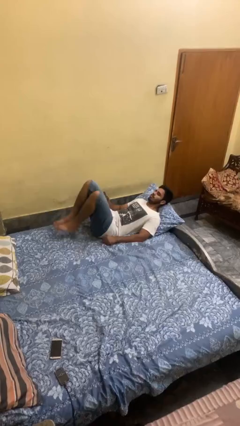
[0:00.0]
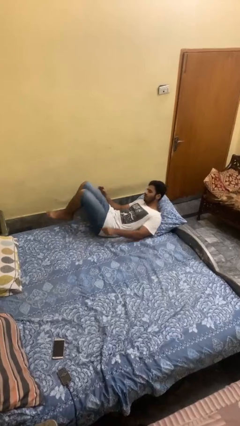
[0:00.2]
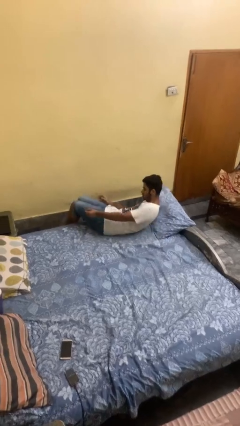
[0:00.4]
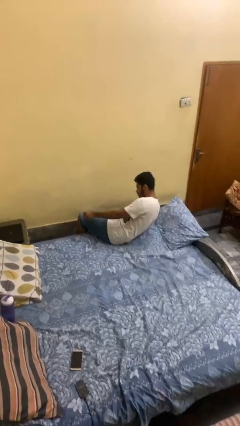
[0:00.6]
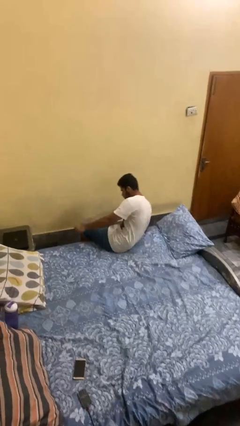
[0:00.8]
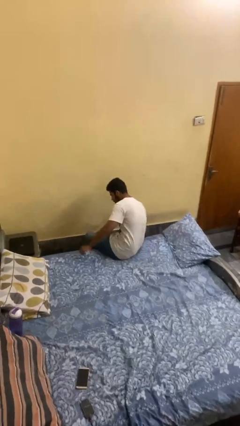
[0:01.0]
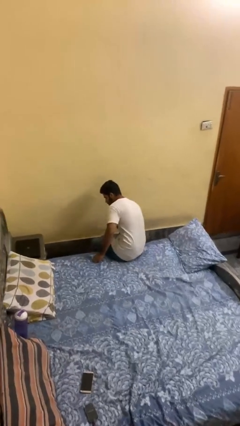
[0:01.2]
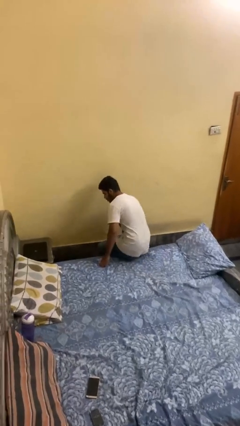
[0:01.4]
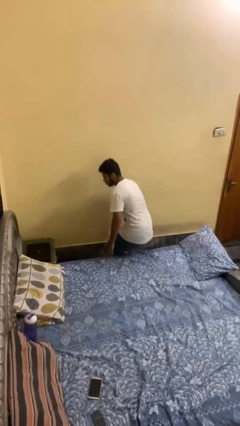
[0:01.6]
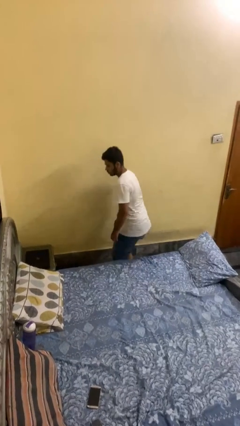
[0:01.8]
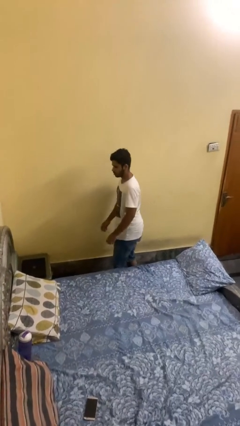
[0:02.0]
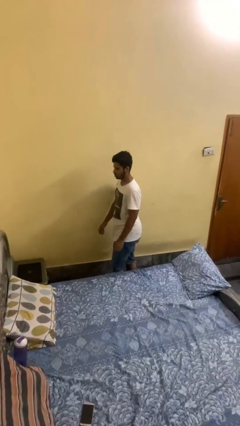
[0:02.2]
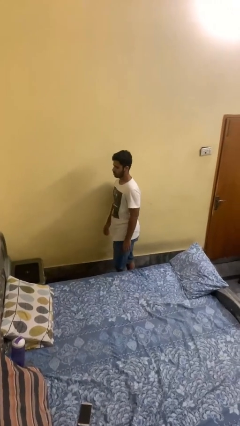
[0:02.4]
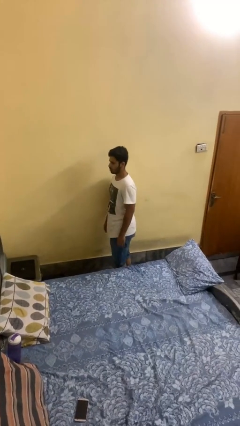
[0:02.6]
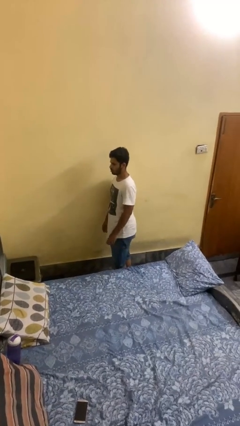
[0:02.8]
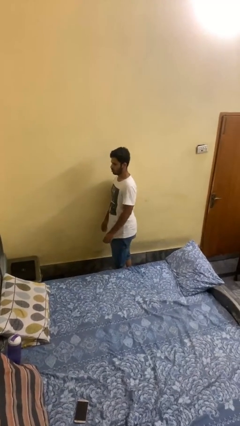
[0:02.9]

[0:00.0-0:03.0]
person stands up

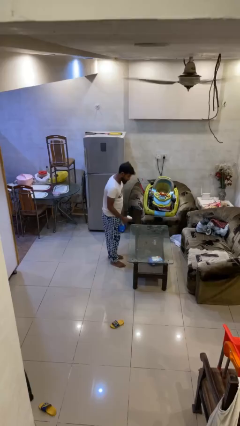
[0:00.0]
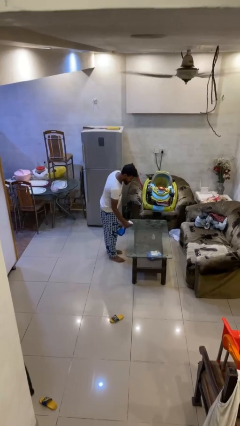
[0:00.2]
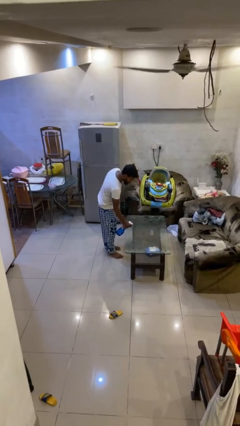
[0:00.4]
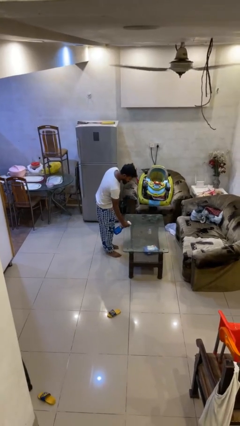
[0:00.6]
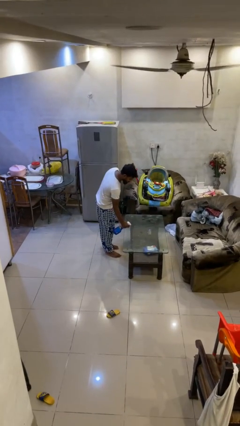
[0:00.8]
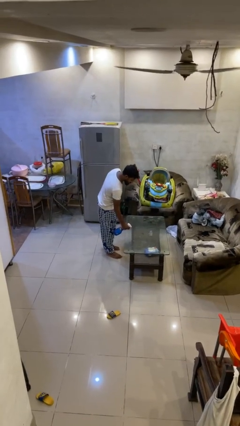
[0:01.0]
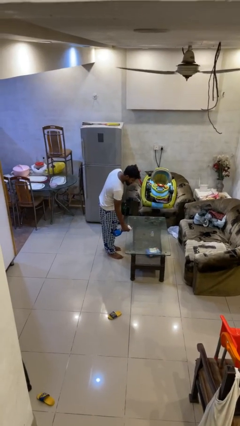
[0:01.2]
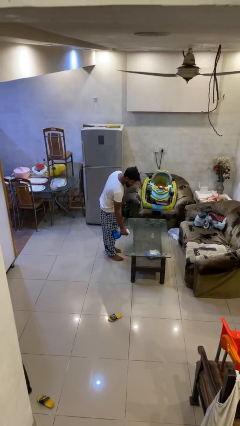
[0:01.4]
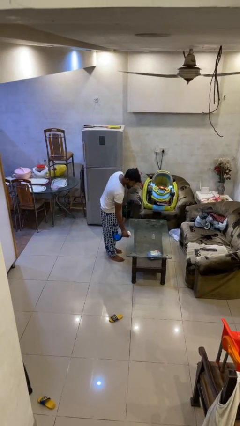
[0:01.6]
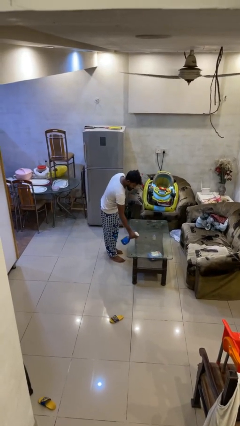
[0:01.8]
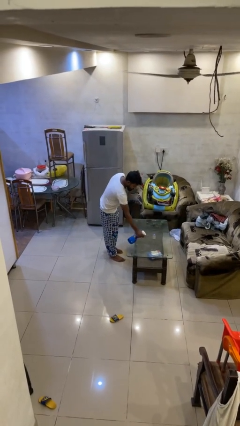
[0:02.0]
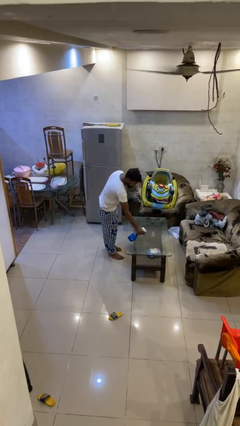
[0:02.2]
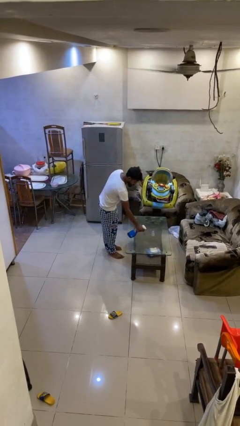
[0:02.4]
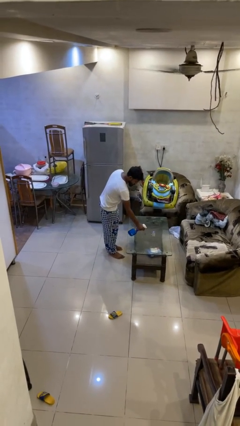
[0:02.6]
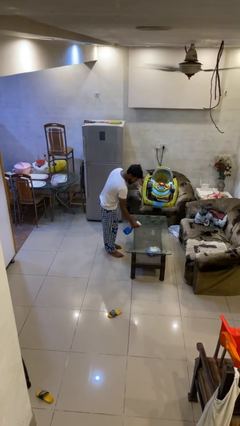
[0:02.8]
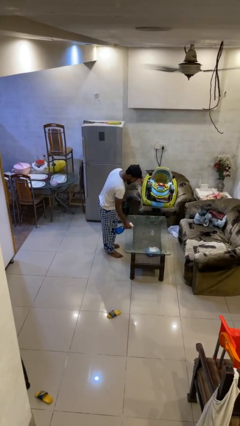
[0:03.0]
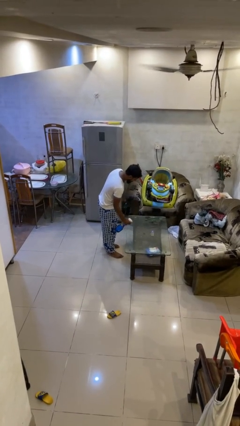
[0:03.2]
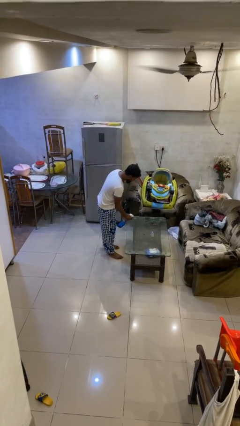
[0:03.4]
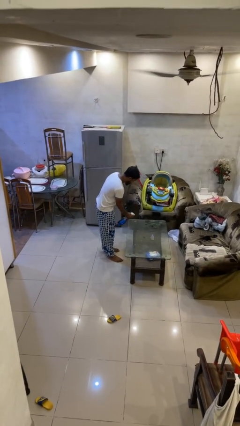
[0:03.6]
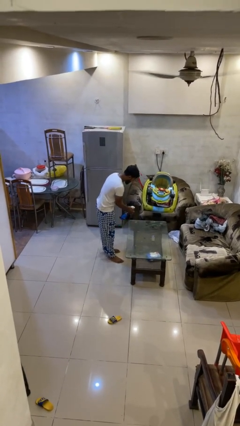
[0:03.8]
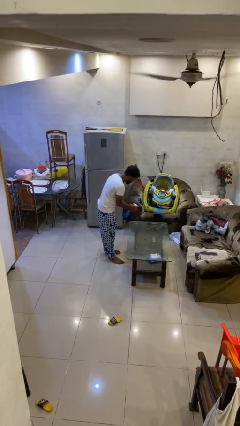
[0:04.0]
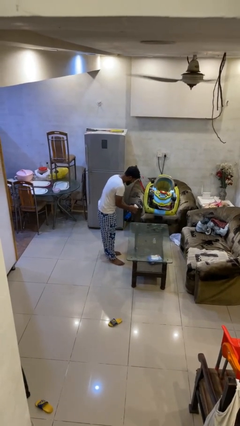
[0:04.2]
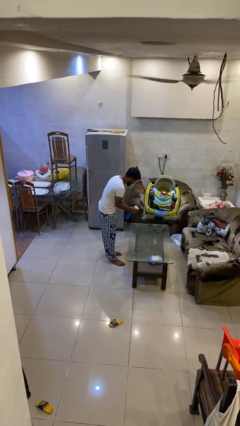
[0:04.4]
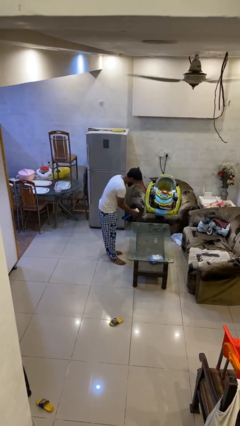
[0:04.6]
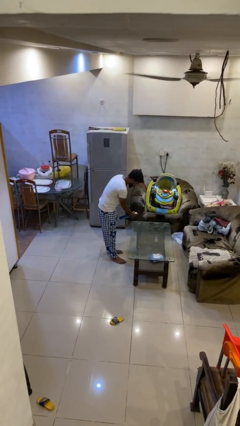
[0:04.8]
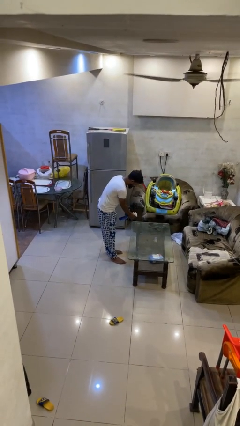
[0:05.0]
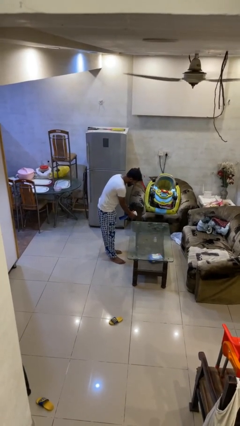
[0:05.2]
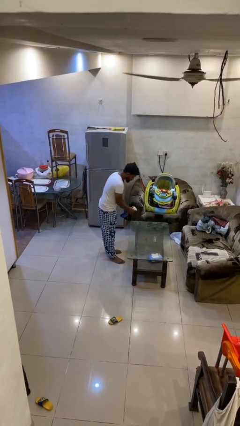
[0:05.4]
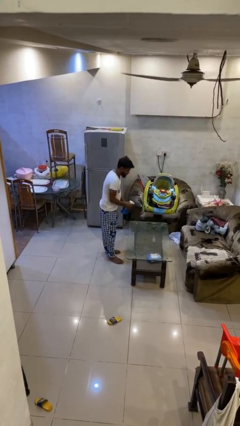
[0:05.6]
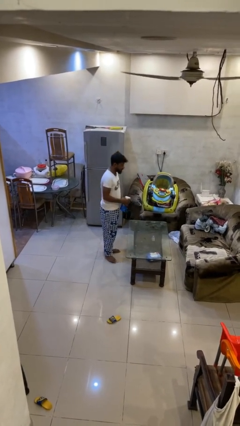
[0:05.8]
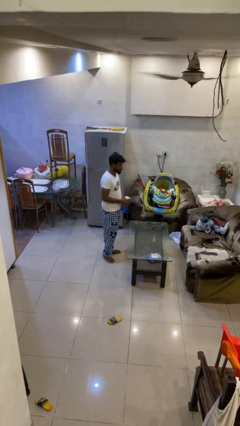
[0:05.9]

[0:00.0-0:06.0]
person sprays from bottle

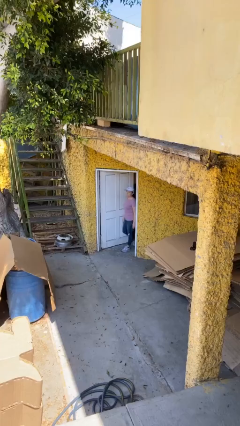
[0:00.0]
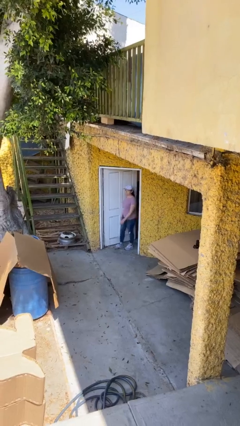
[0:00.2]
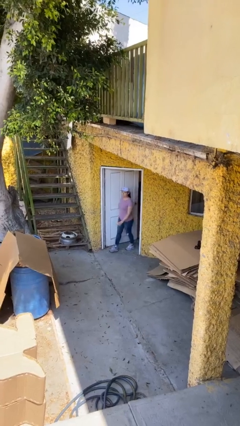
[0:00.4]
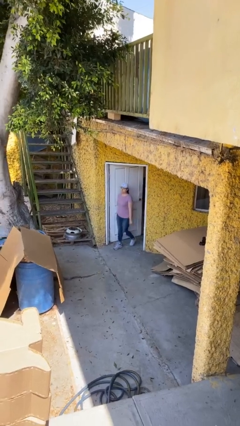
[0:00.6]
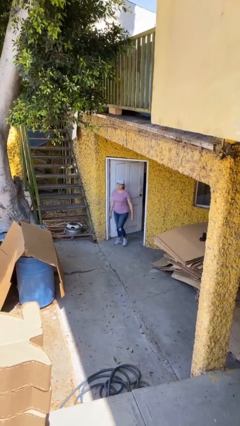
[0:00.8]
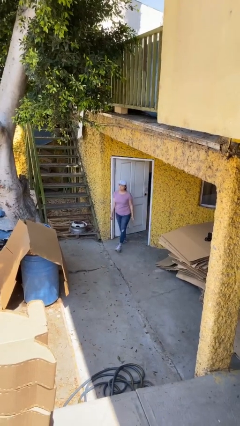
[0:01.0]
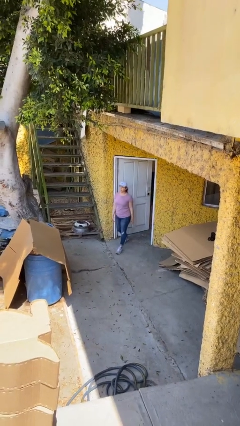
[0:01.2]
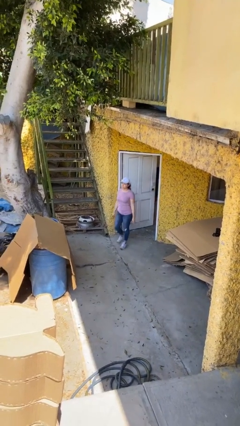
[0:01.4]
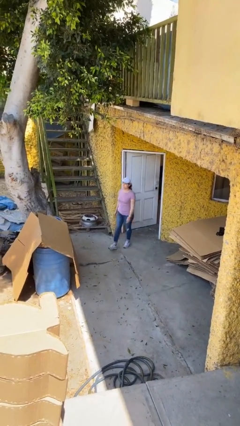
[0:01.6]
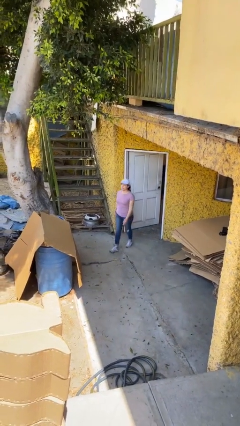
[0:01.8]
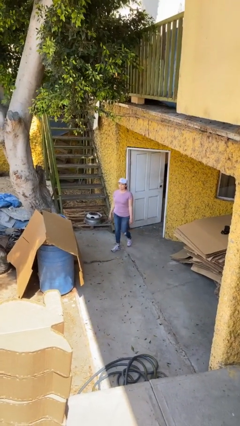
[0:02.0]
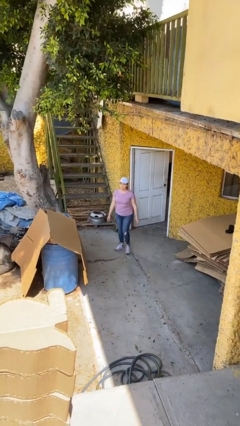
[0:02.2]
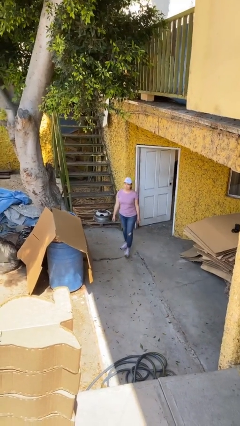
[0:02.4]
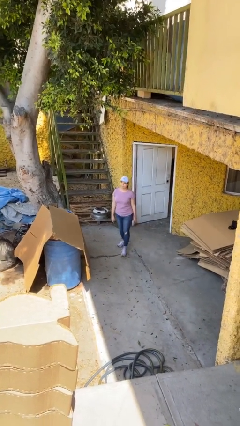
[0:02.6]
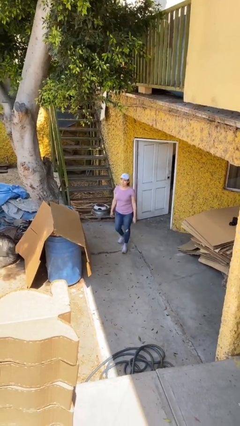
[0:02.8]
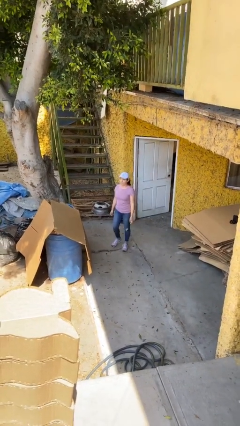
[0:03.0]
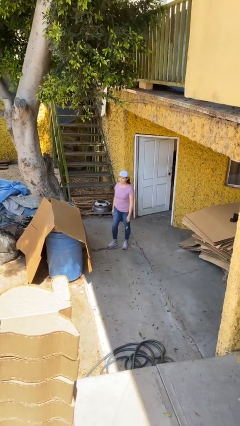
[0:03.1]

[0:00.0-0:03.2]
person enters scene through structure

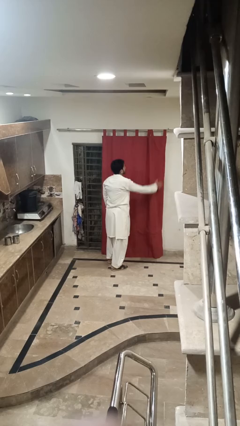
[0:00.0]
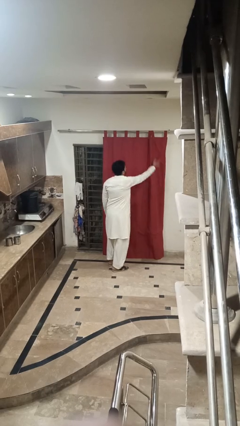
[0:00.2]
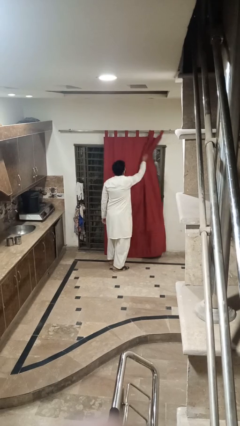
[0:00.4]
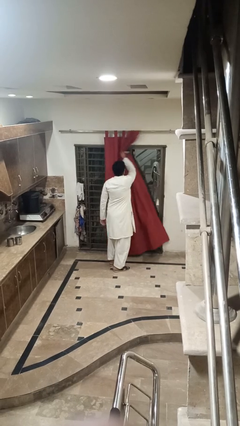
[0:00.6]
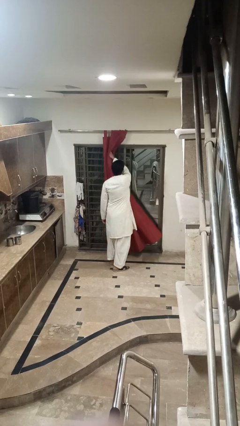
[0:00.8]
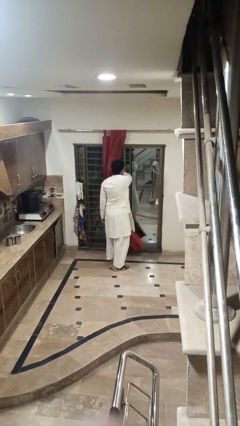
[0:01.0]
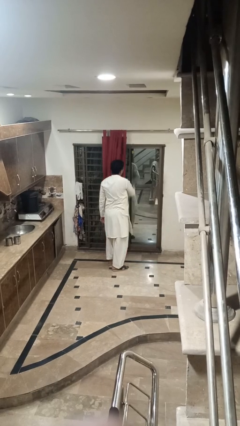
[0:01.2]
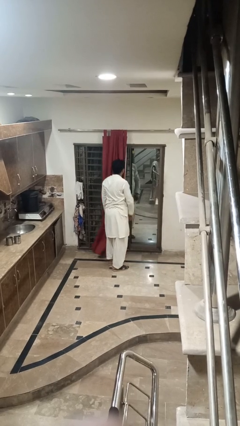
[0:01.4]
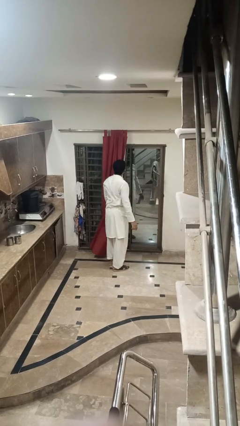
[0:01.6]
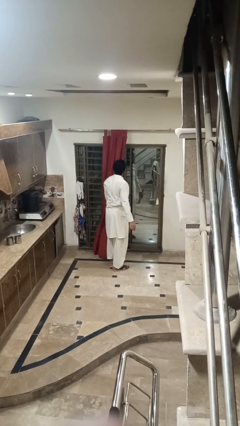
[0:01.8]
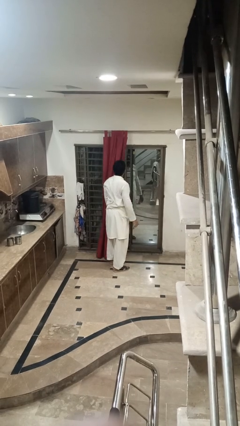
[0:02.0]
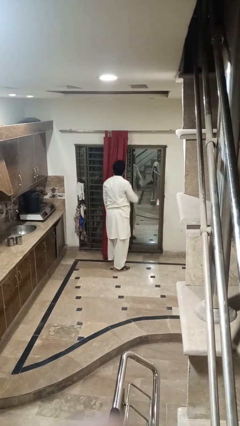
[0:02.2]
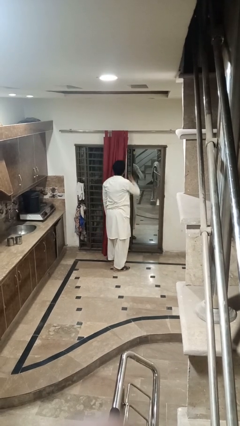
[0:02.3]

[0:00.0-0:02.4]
person opens curtains

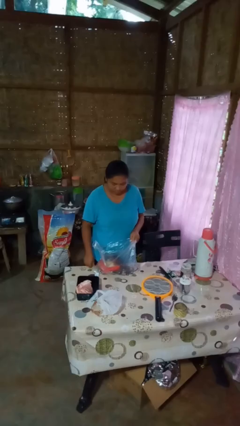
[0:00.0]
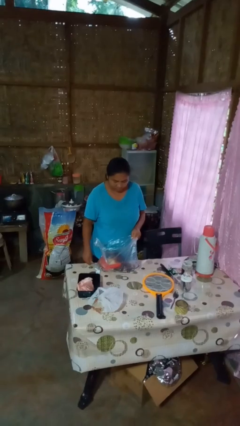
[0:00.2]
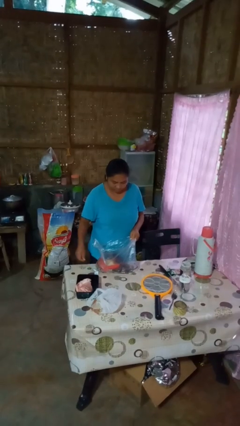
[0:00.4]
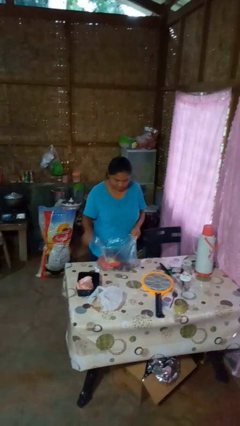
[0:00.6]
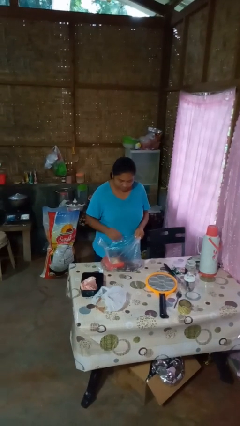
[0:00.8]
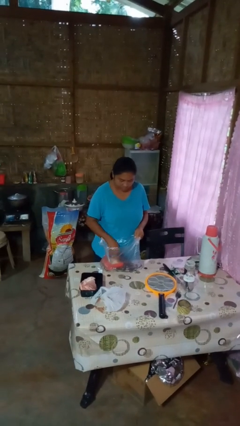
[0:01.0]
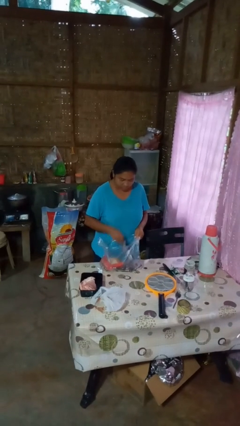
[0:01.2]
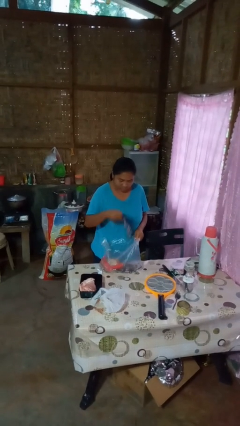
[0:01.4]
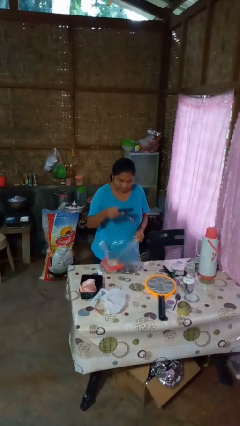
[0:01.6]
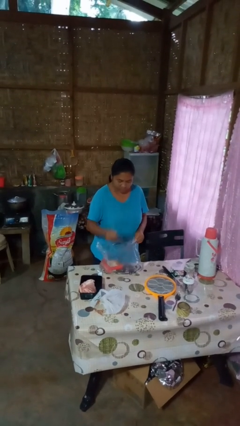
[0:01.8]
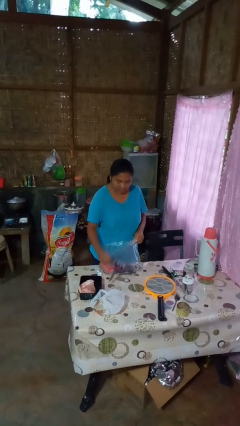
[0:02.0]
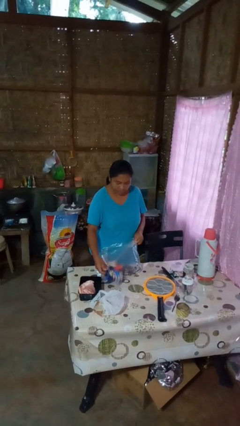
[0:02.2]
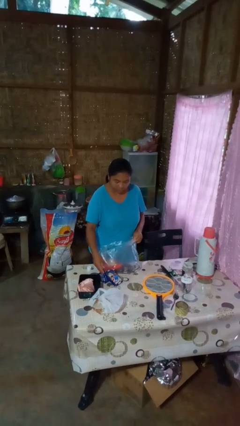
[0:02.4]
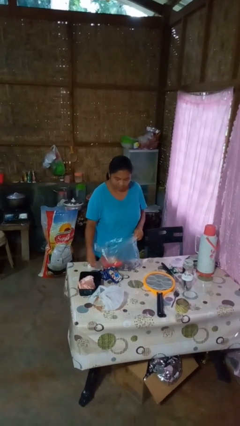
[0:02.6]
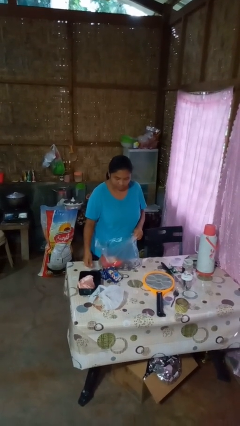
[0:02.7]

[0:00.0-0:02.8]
person takes object from bag
